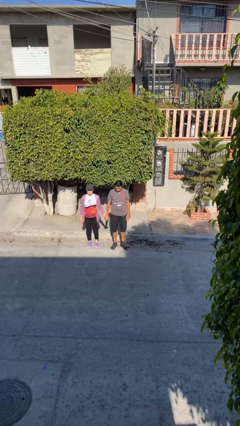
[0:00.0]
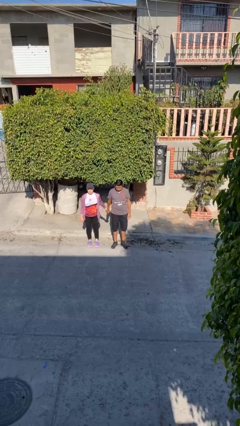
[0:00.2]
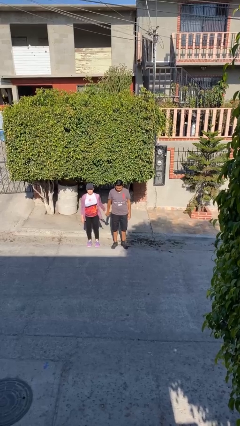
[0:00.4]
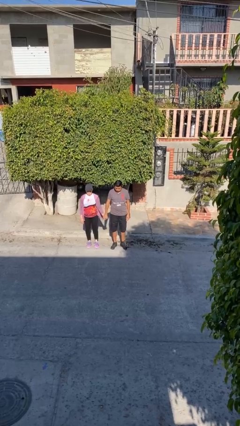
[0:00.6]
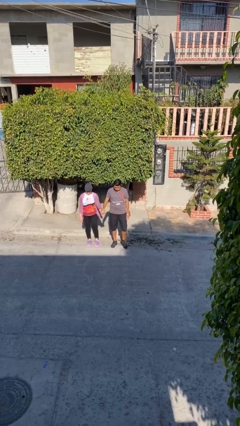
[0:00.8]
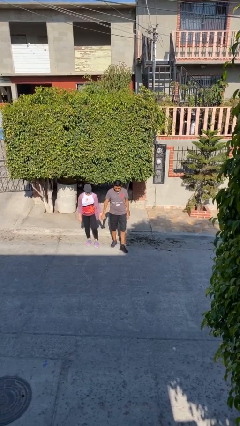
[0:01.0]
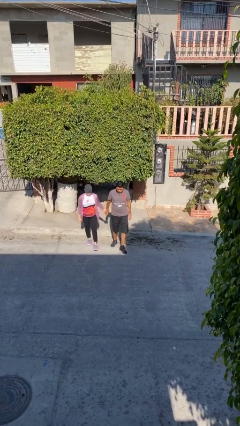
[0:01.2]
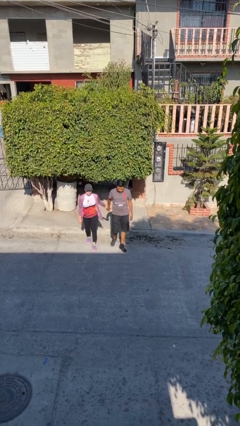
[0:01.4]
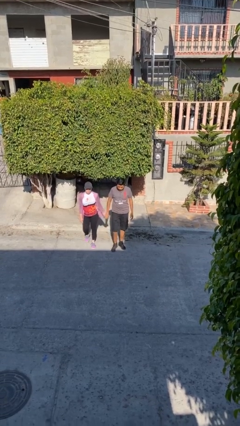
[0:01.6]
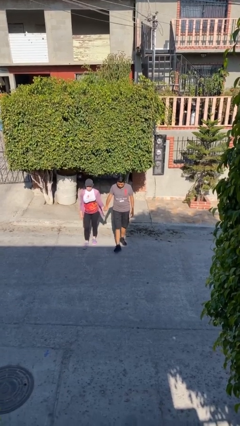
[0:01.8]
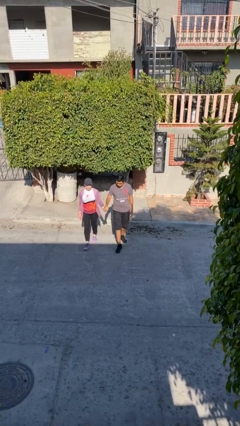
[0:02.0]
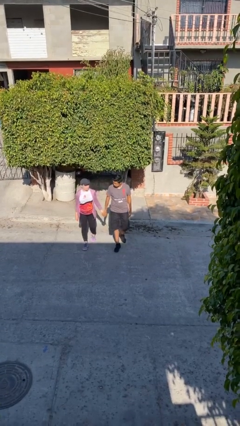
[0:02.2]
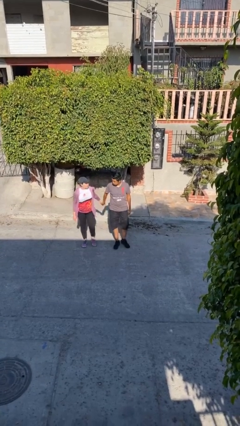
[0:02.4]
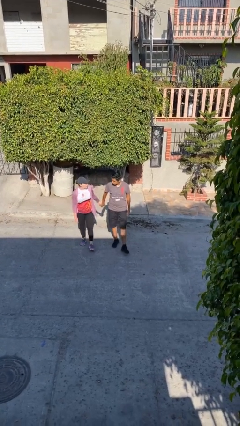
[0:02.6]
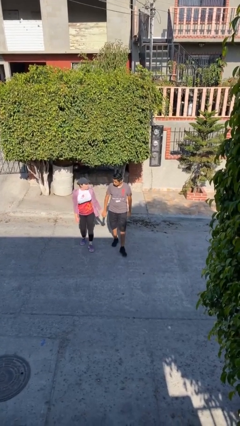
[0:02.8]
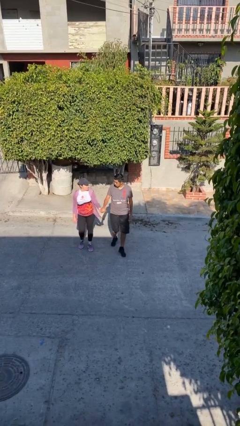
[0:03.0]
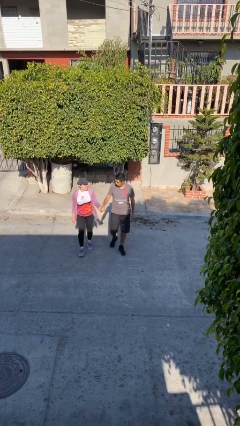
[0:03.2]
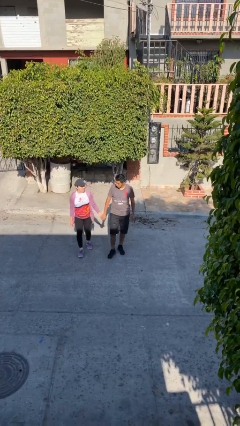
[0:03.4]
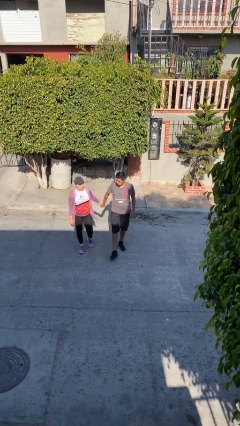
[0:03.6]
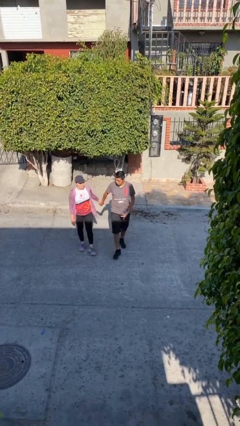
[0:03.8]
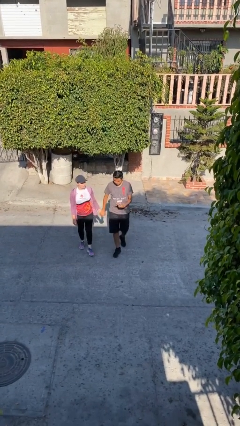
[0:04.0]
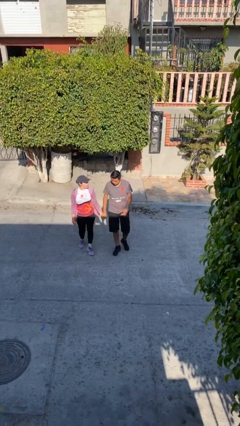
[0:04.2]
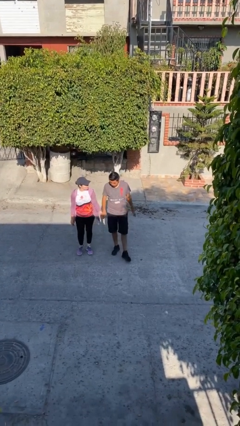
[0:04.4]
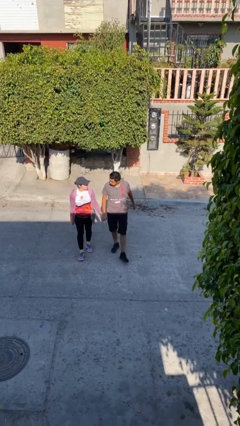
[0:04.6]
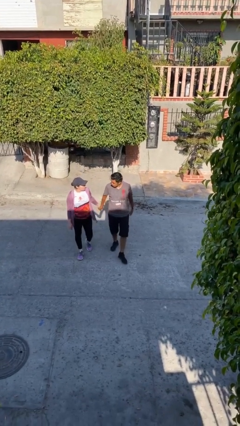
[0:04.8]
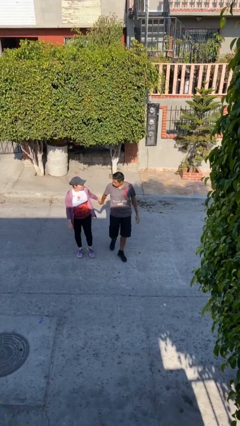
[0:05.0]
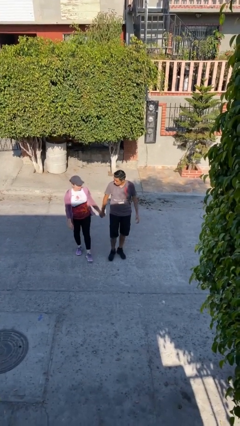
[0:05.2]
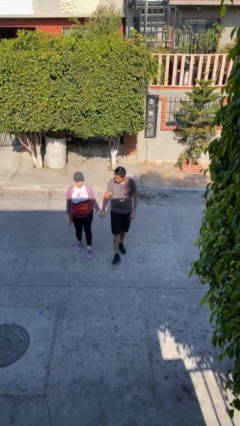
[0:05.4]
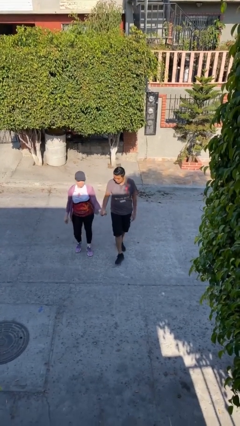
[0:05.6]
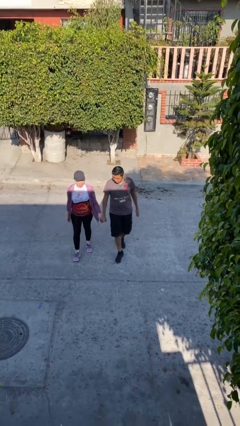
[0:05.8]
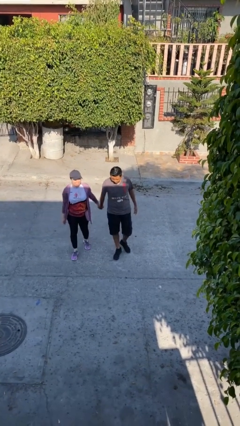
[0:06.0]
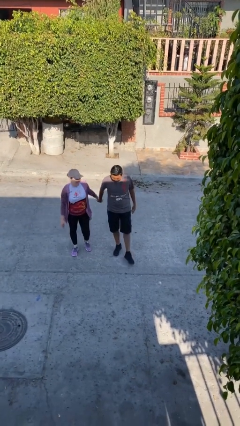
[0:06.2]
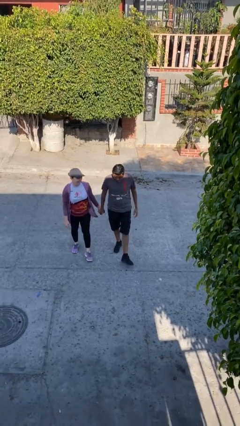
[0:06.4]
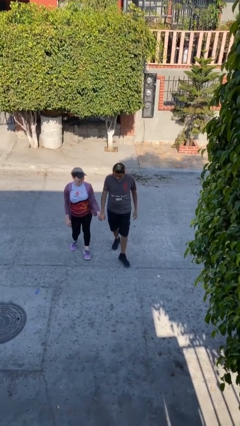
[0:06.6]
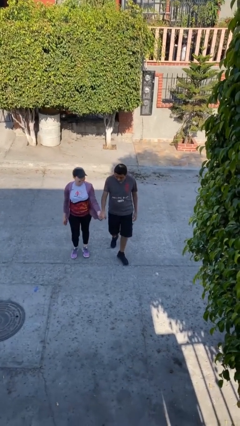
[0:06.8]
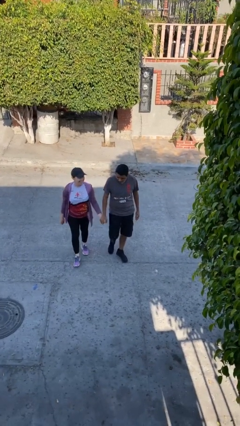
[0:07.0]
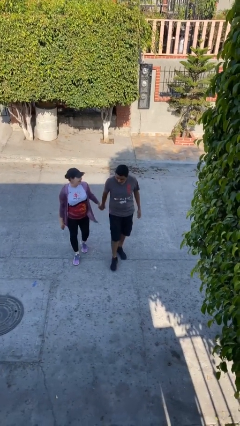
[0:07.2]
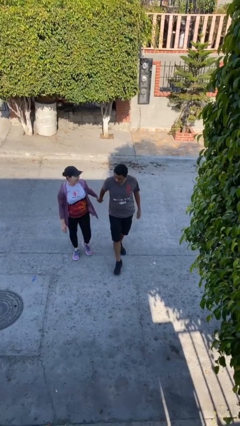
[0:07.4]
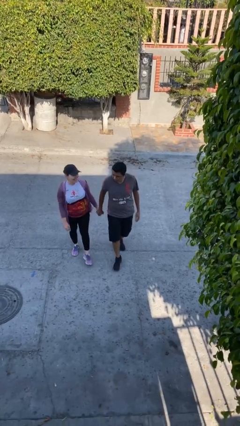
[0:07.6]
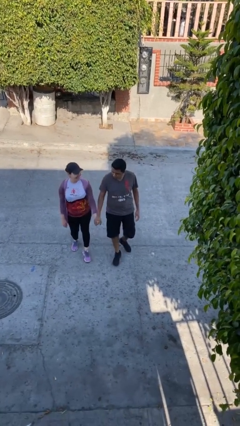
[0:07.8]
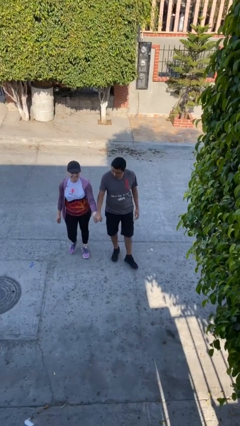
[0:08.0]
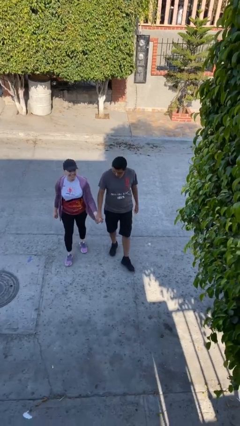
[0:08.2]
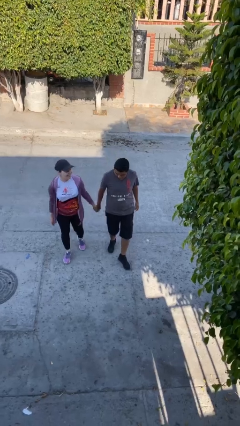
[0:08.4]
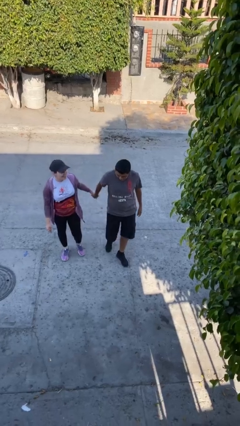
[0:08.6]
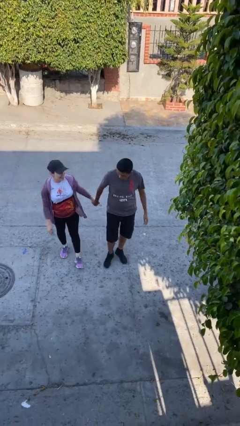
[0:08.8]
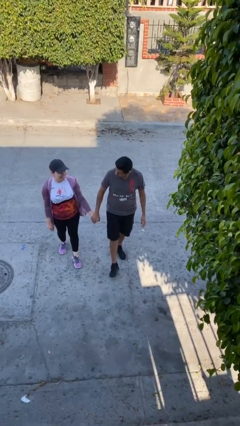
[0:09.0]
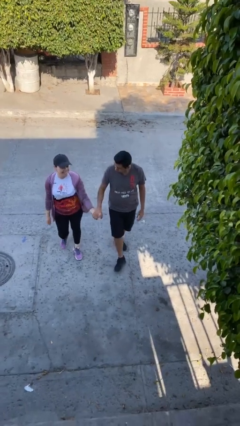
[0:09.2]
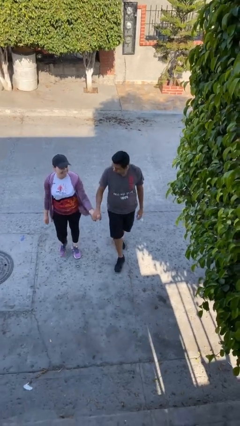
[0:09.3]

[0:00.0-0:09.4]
person holds hand

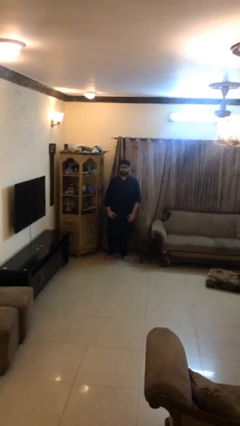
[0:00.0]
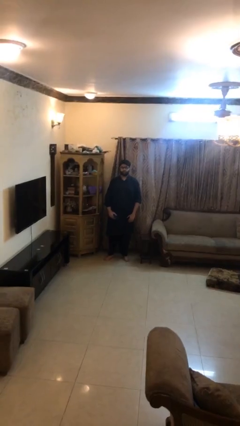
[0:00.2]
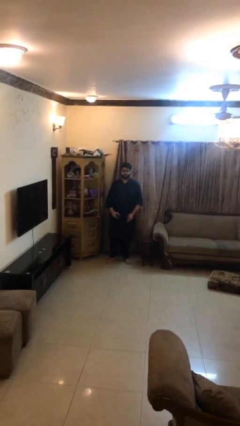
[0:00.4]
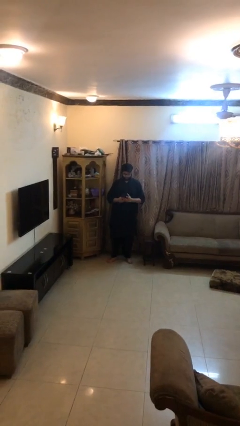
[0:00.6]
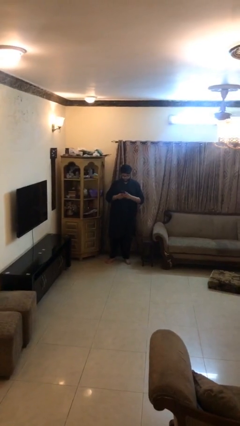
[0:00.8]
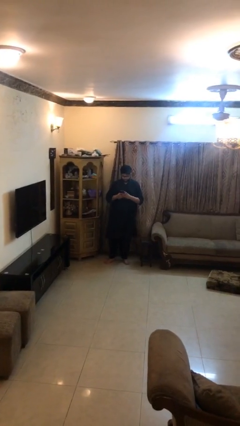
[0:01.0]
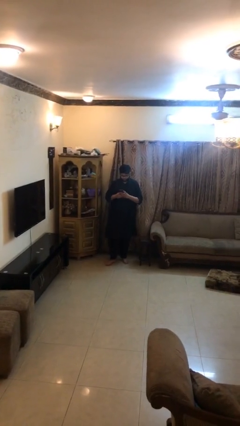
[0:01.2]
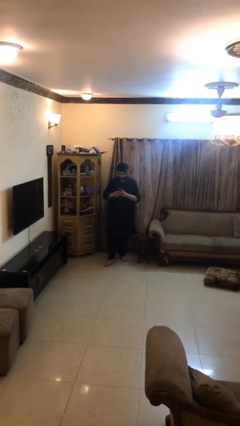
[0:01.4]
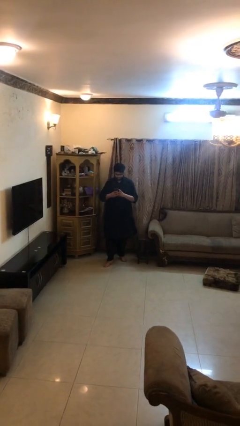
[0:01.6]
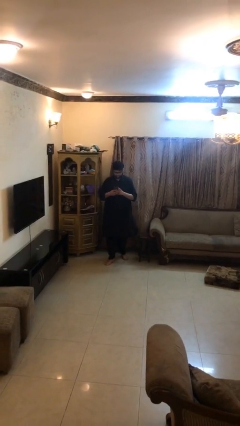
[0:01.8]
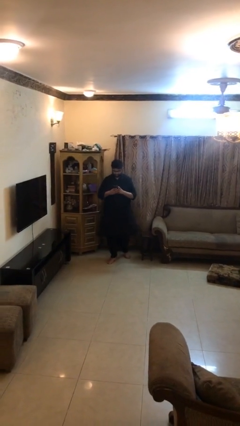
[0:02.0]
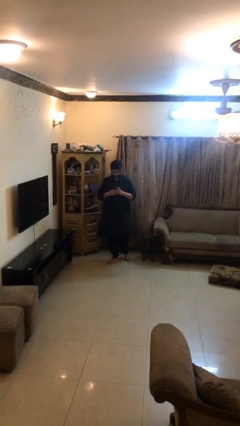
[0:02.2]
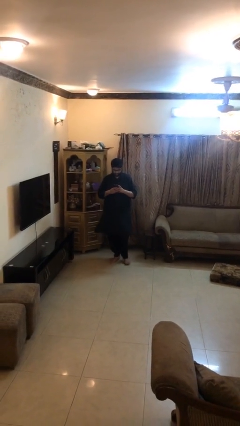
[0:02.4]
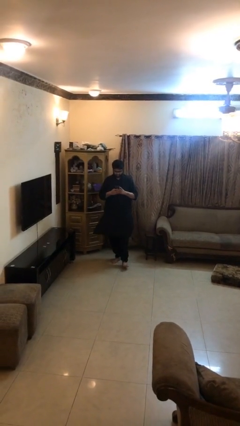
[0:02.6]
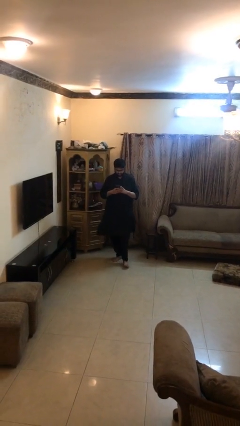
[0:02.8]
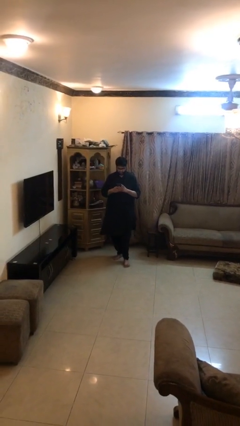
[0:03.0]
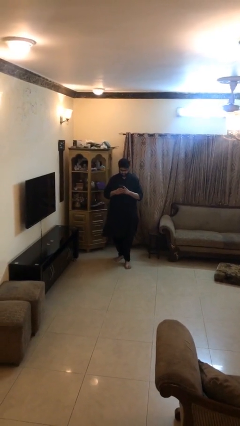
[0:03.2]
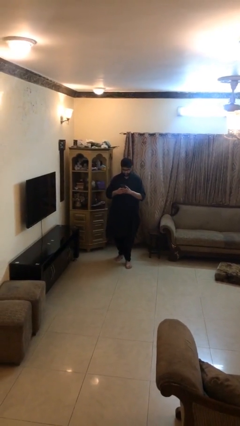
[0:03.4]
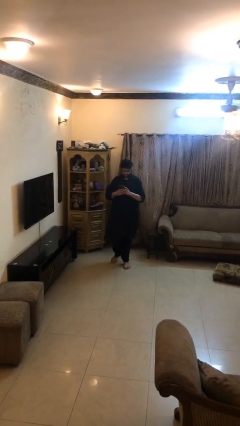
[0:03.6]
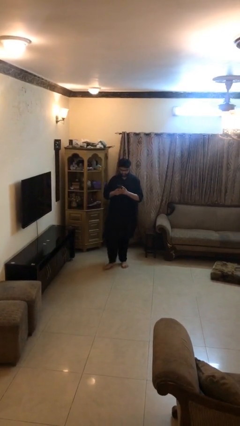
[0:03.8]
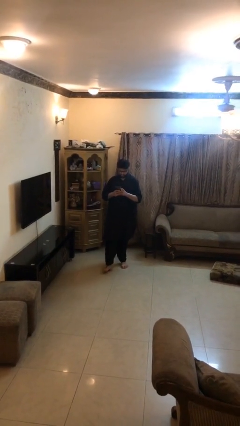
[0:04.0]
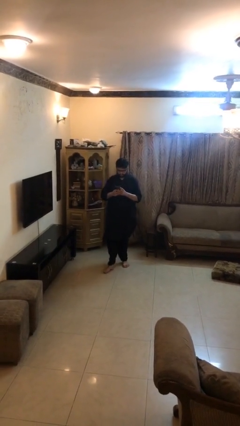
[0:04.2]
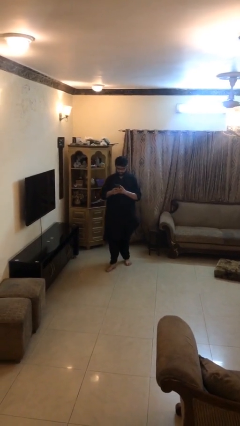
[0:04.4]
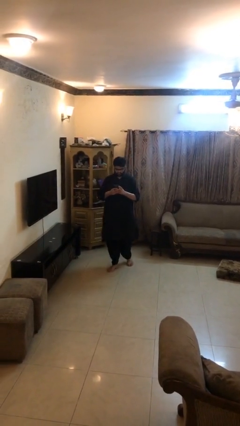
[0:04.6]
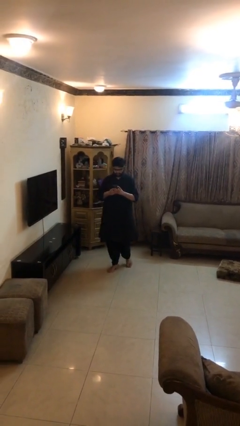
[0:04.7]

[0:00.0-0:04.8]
person texts on phone

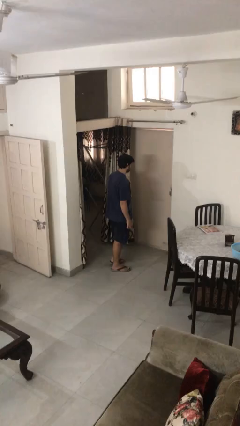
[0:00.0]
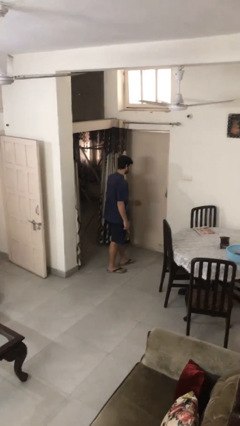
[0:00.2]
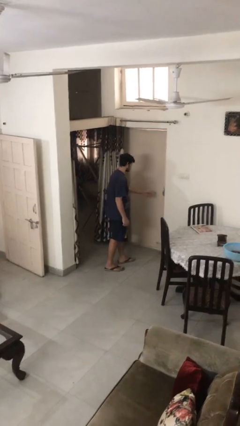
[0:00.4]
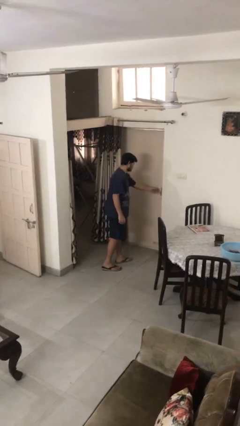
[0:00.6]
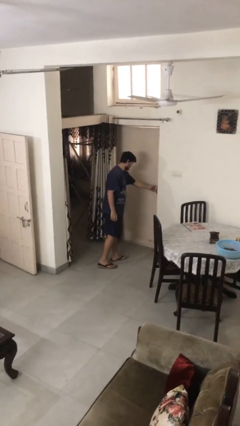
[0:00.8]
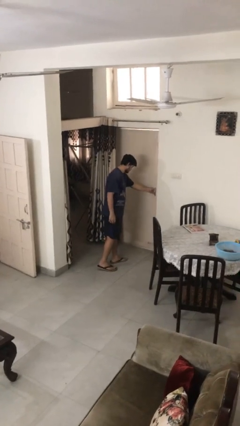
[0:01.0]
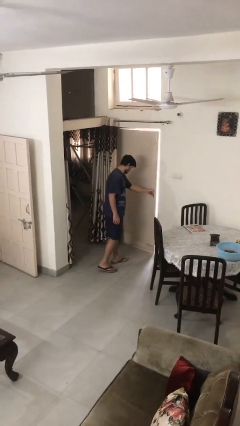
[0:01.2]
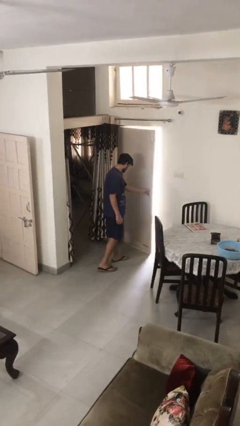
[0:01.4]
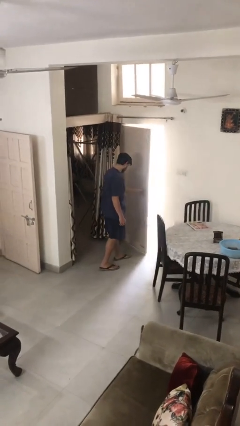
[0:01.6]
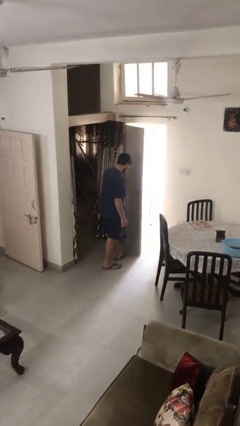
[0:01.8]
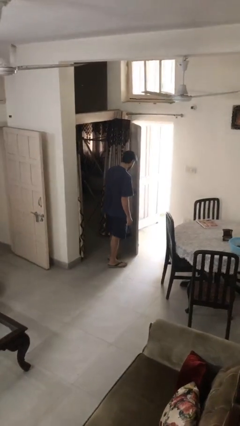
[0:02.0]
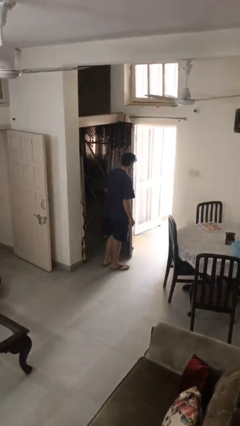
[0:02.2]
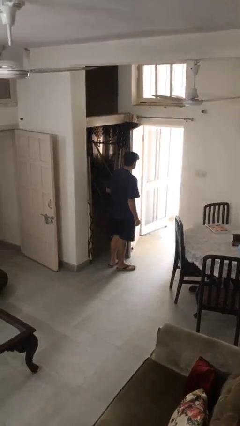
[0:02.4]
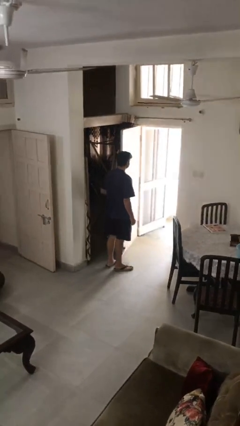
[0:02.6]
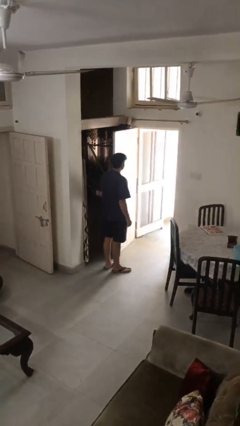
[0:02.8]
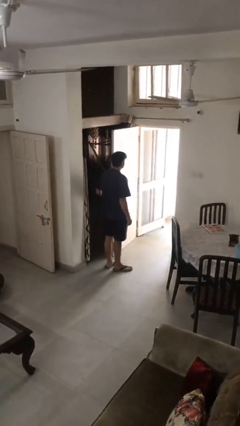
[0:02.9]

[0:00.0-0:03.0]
person opens facility door

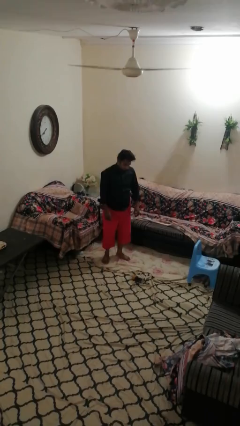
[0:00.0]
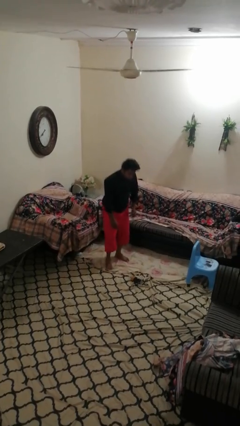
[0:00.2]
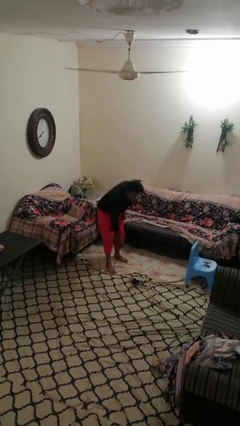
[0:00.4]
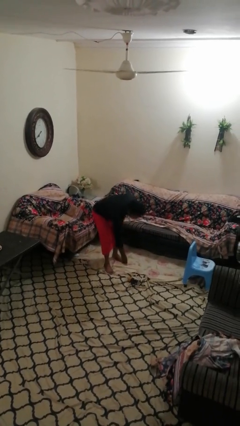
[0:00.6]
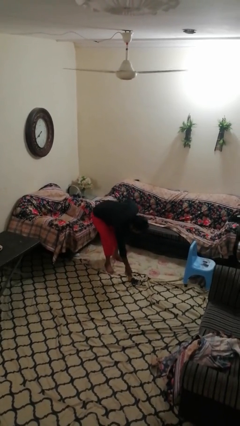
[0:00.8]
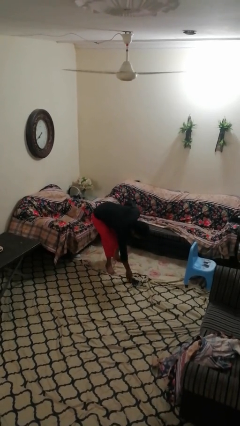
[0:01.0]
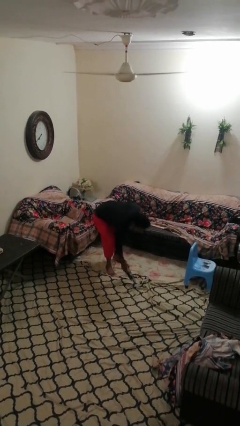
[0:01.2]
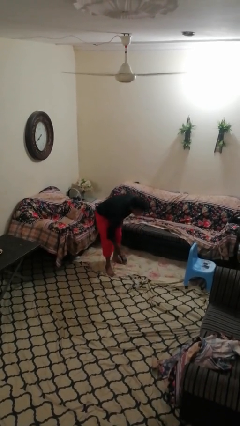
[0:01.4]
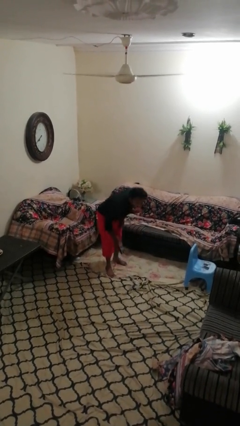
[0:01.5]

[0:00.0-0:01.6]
person picks up object from floor
